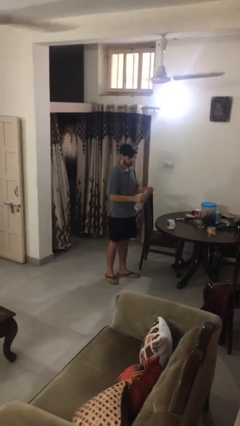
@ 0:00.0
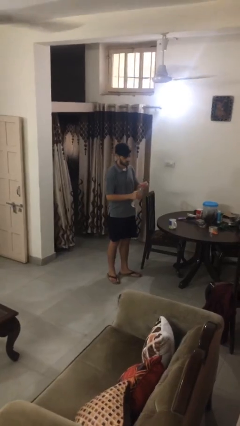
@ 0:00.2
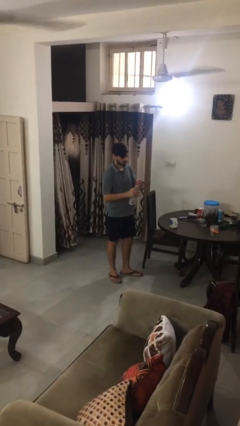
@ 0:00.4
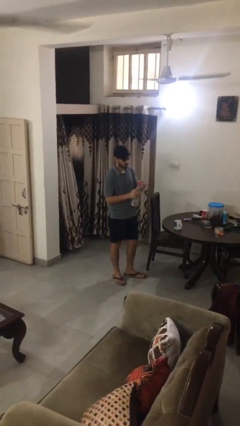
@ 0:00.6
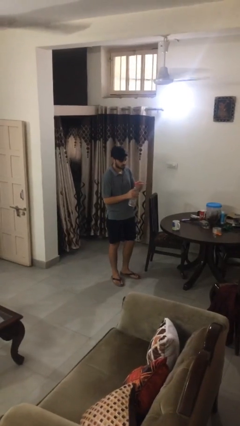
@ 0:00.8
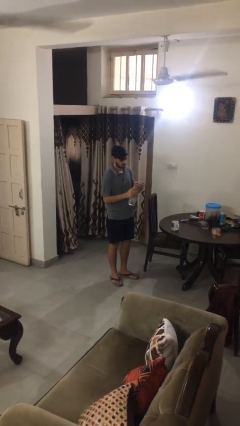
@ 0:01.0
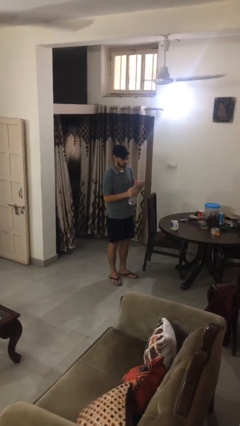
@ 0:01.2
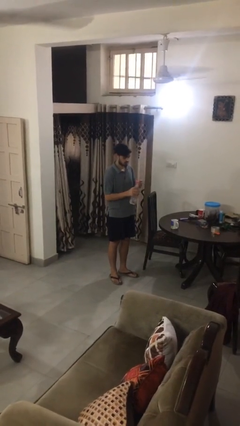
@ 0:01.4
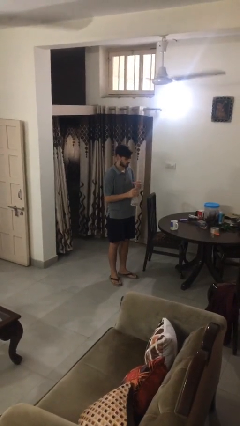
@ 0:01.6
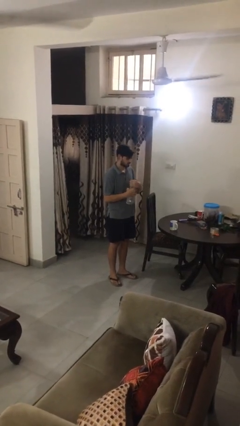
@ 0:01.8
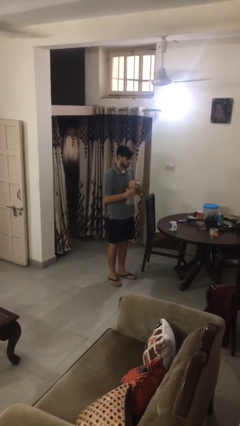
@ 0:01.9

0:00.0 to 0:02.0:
person screws lid to bottle

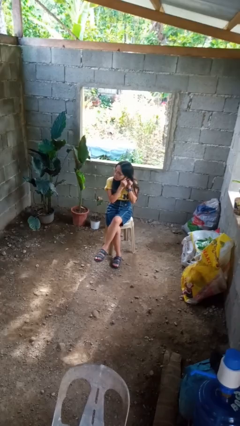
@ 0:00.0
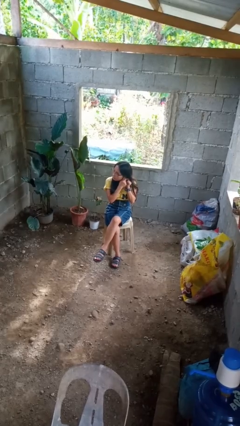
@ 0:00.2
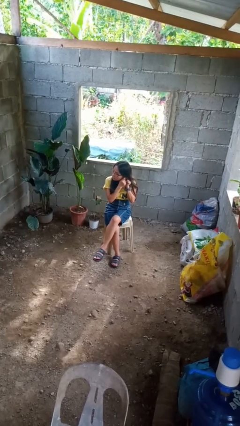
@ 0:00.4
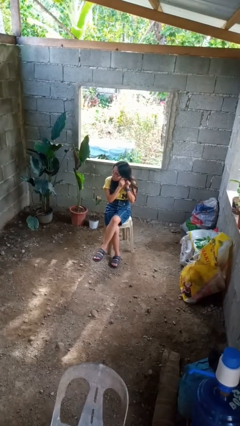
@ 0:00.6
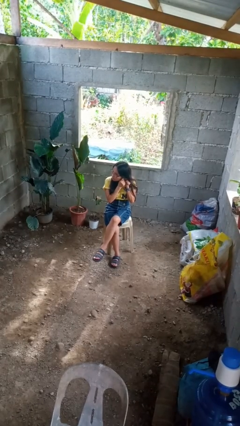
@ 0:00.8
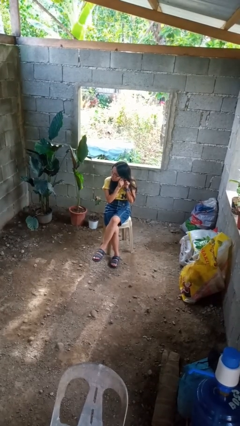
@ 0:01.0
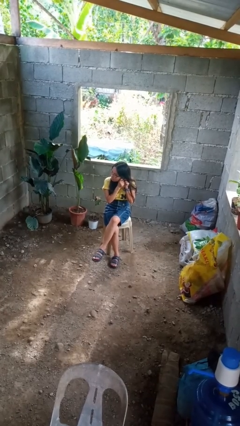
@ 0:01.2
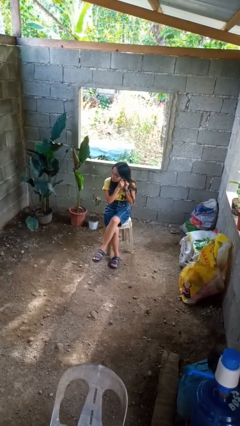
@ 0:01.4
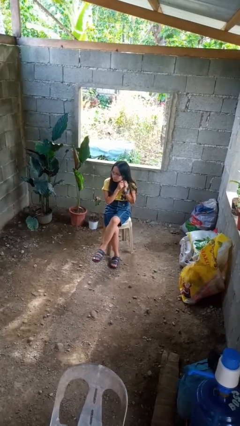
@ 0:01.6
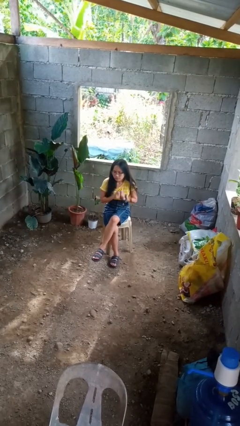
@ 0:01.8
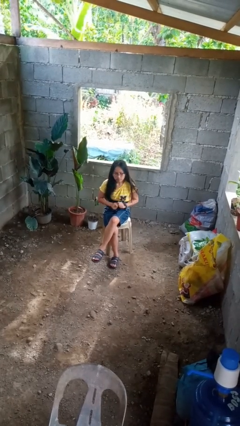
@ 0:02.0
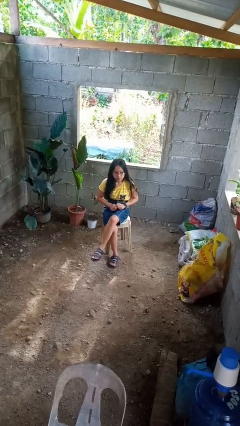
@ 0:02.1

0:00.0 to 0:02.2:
person puts on earrings

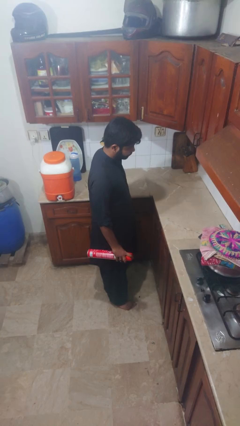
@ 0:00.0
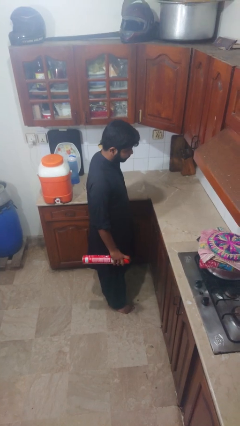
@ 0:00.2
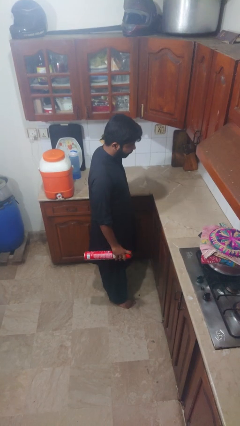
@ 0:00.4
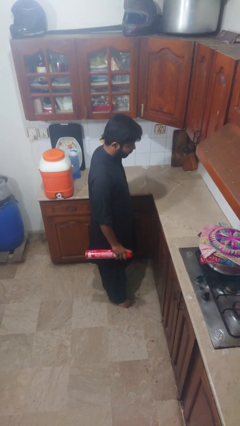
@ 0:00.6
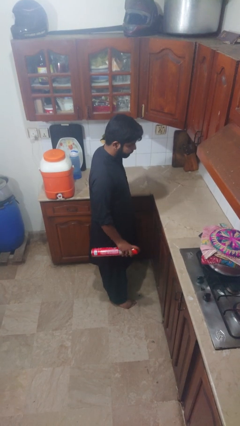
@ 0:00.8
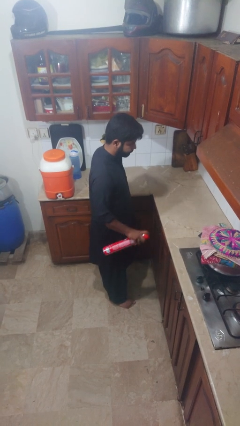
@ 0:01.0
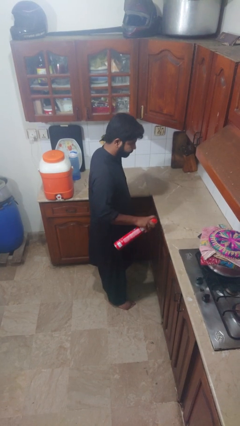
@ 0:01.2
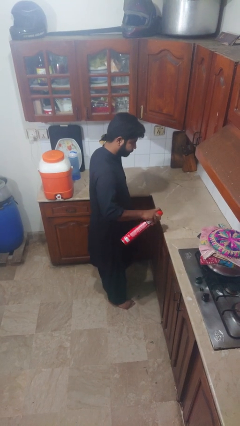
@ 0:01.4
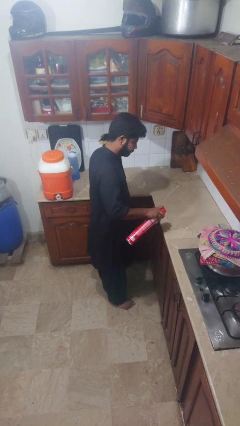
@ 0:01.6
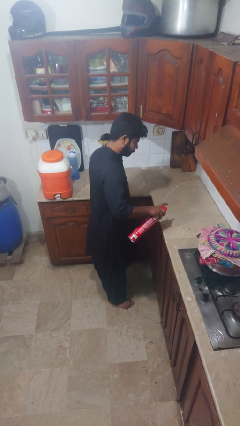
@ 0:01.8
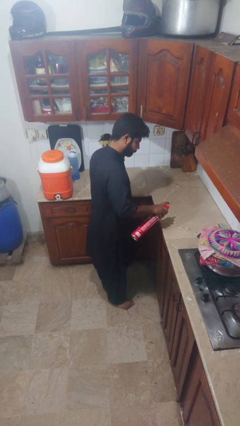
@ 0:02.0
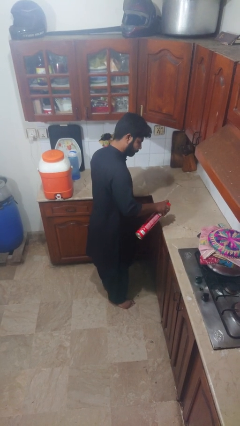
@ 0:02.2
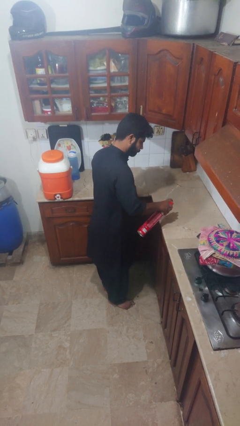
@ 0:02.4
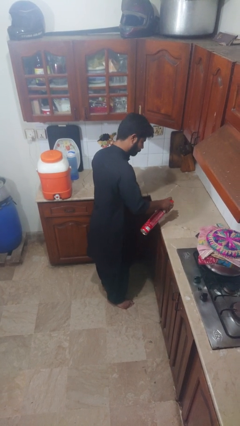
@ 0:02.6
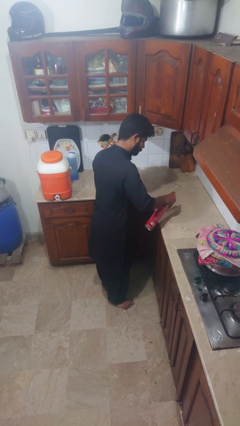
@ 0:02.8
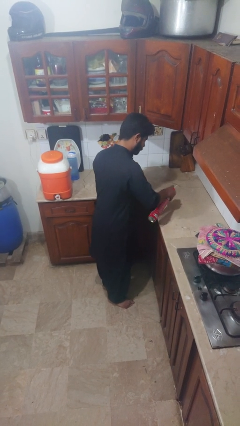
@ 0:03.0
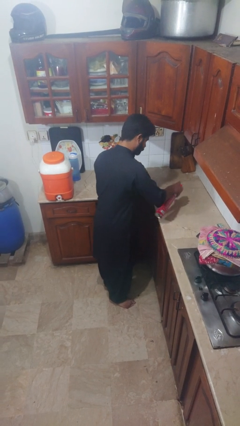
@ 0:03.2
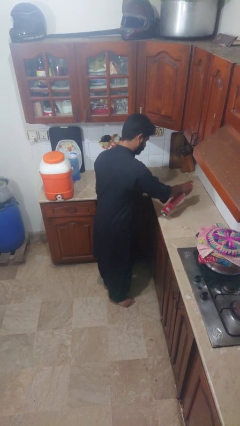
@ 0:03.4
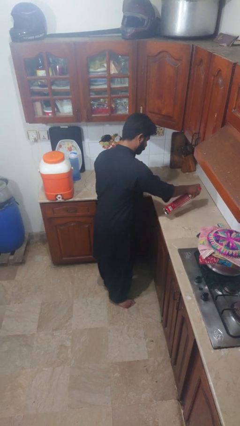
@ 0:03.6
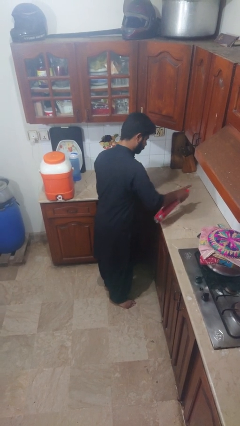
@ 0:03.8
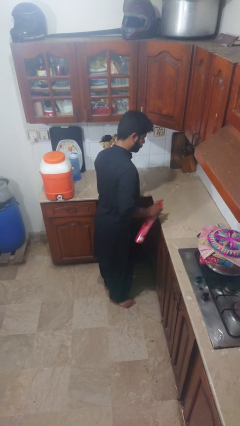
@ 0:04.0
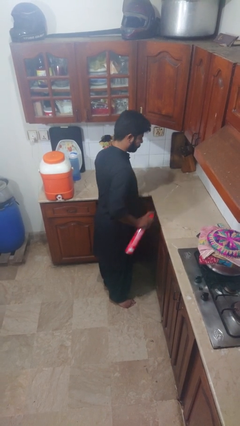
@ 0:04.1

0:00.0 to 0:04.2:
person sprays from bottle

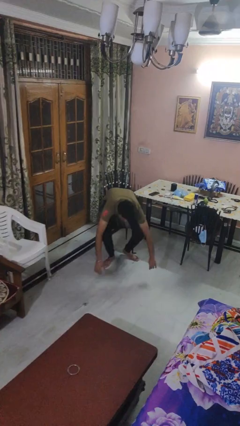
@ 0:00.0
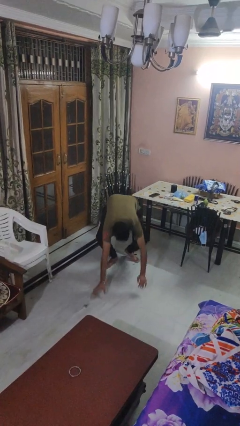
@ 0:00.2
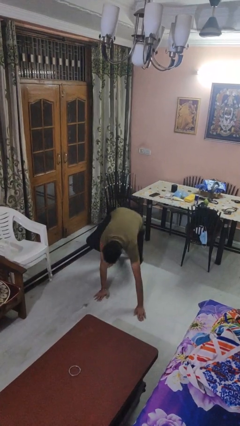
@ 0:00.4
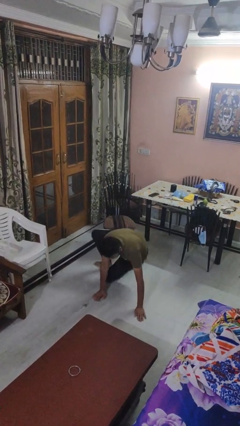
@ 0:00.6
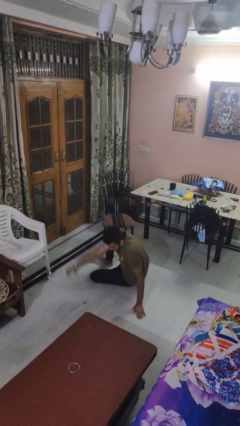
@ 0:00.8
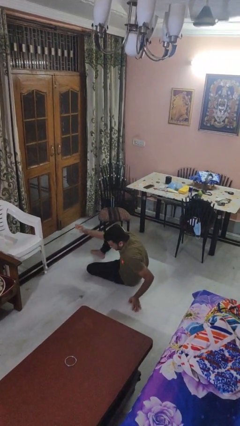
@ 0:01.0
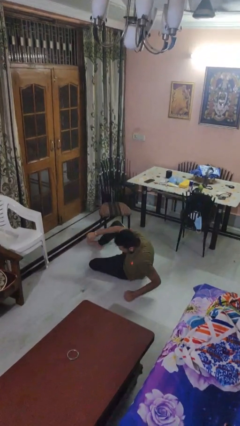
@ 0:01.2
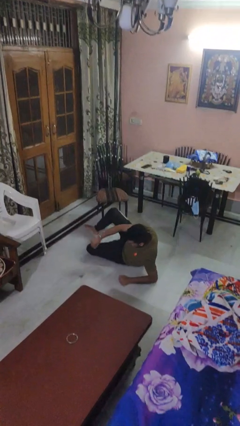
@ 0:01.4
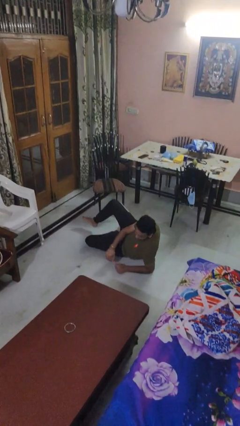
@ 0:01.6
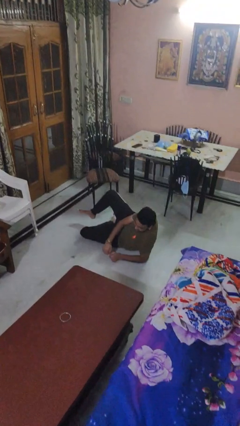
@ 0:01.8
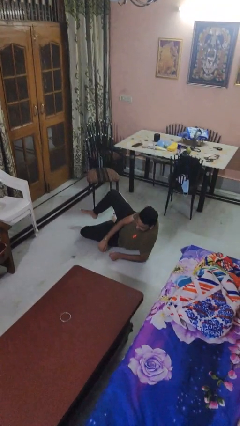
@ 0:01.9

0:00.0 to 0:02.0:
person falls while standing

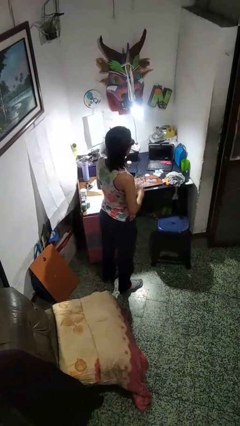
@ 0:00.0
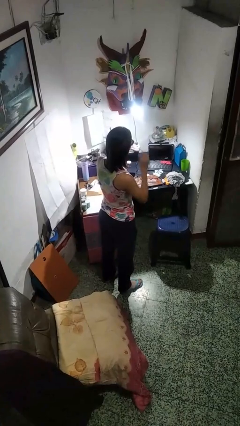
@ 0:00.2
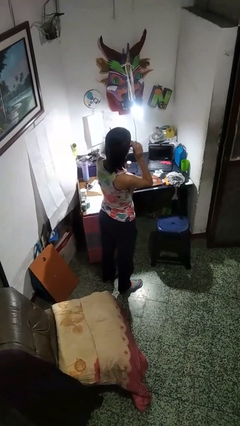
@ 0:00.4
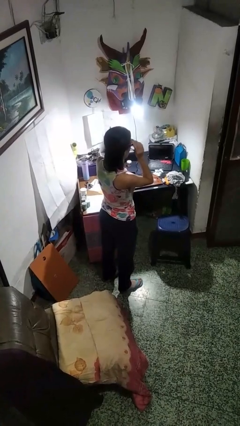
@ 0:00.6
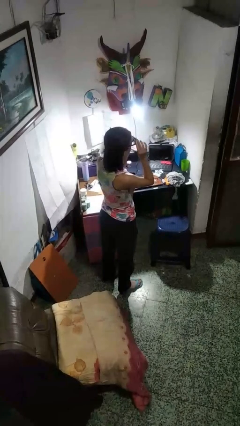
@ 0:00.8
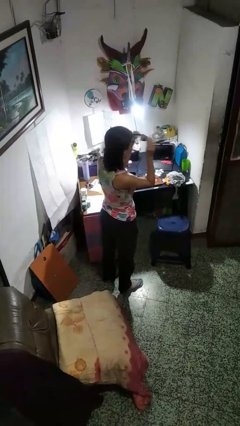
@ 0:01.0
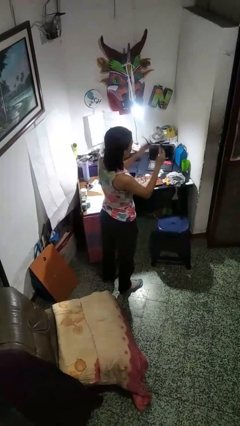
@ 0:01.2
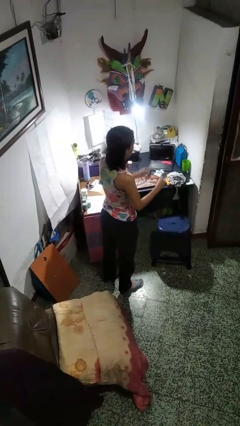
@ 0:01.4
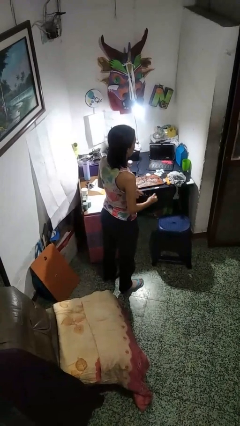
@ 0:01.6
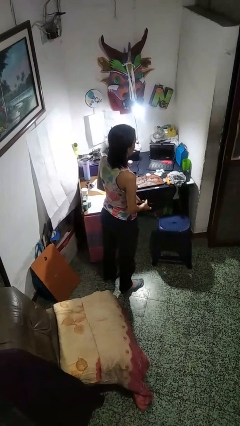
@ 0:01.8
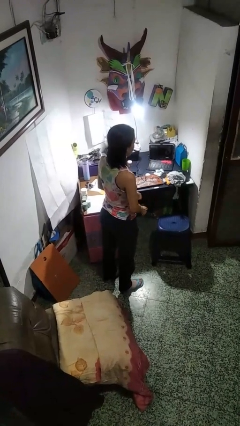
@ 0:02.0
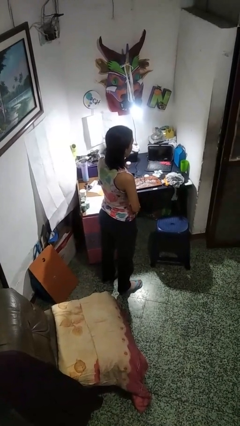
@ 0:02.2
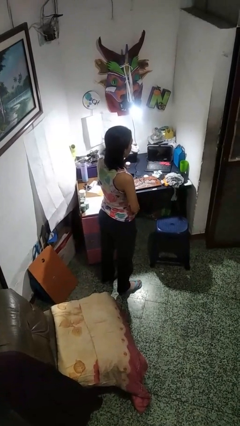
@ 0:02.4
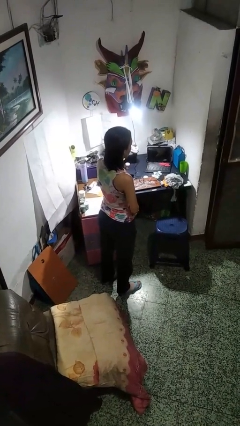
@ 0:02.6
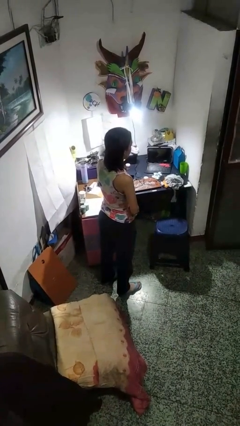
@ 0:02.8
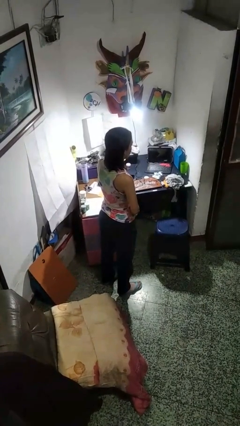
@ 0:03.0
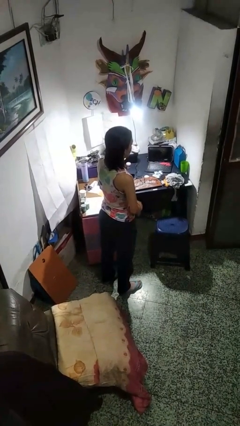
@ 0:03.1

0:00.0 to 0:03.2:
person takes off sunglasses

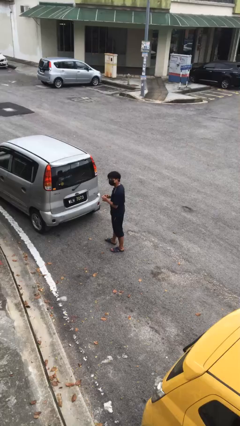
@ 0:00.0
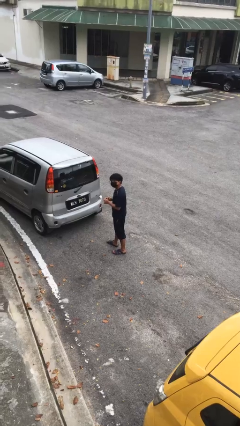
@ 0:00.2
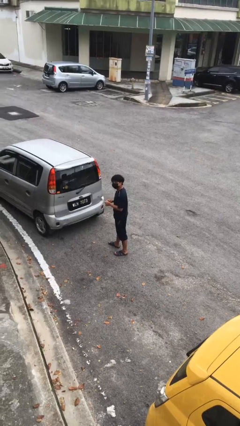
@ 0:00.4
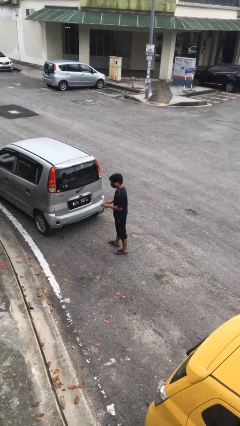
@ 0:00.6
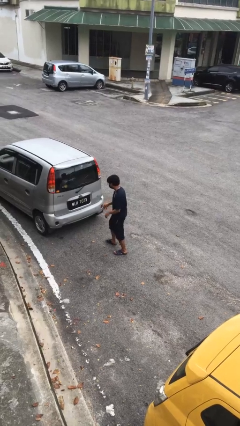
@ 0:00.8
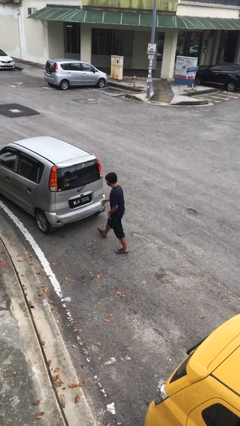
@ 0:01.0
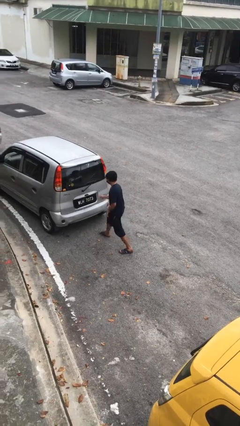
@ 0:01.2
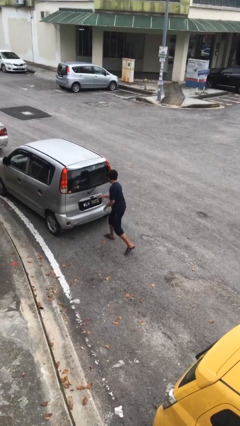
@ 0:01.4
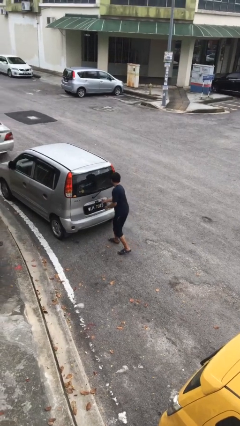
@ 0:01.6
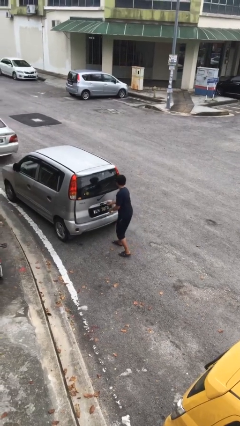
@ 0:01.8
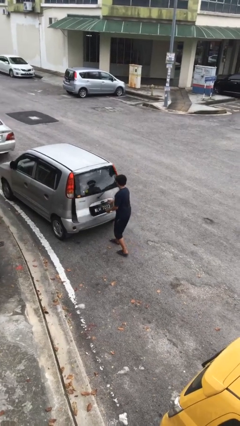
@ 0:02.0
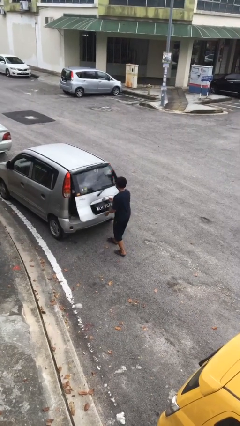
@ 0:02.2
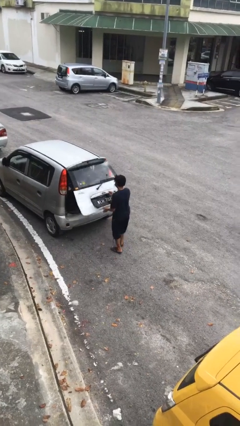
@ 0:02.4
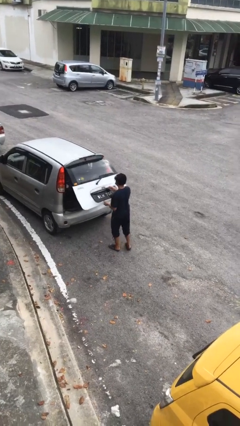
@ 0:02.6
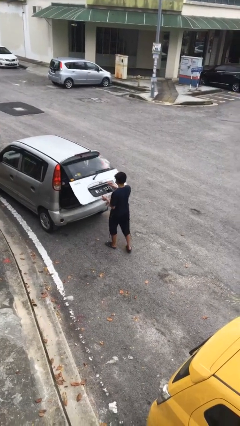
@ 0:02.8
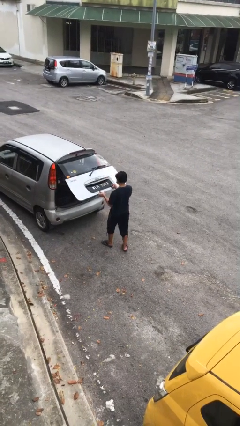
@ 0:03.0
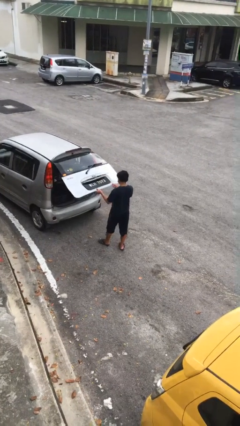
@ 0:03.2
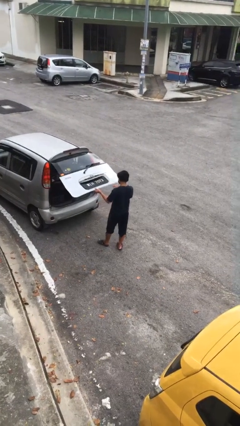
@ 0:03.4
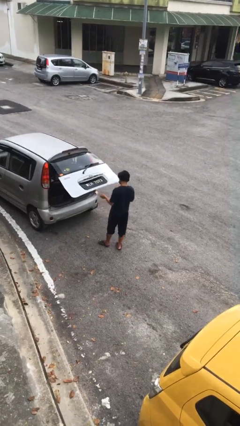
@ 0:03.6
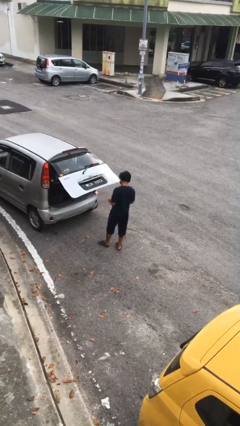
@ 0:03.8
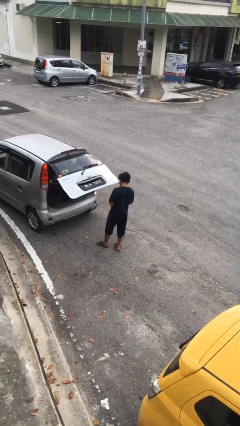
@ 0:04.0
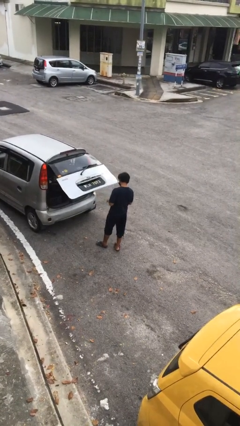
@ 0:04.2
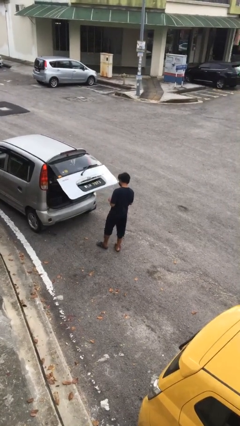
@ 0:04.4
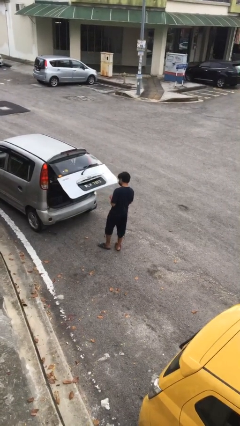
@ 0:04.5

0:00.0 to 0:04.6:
person opens car trunk
